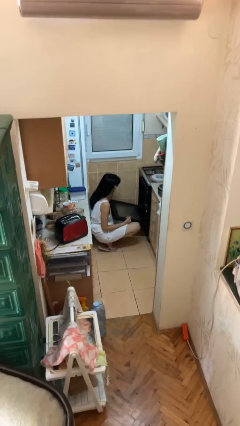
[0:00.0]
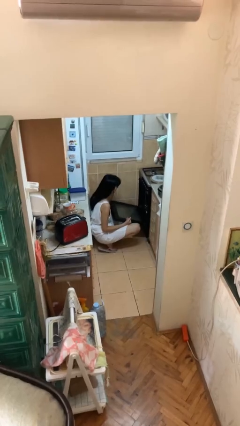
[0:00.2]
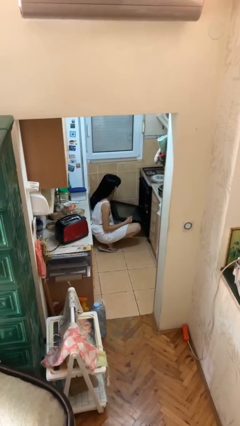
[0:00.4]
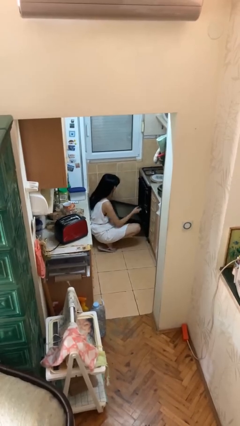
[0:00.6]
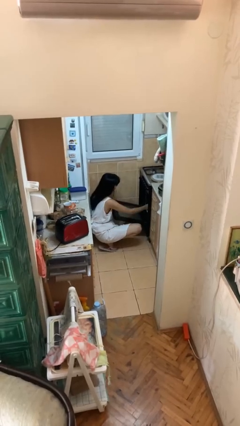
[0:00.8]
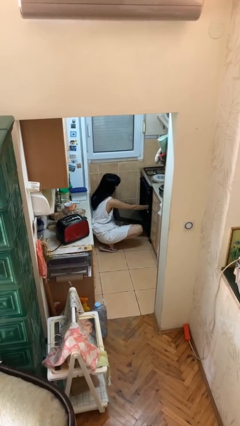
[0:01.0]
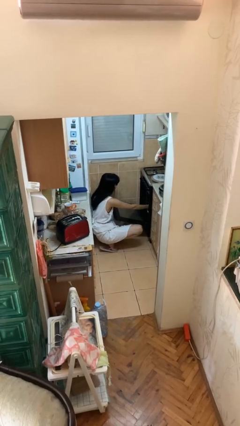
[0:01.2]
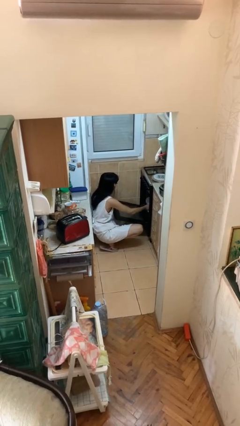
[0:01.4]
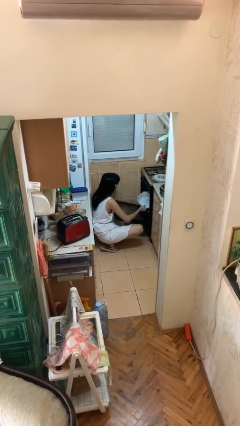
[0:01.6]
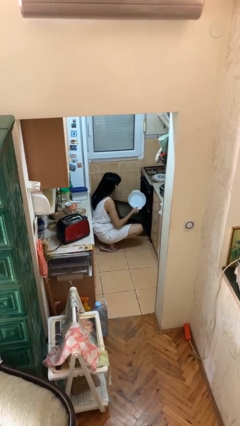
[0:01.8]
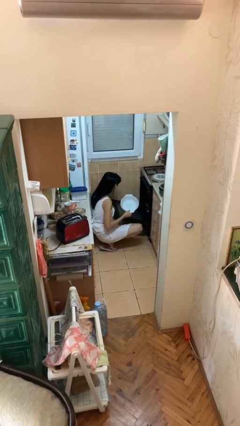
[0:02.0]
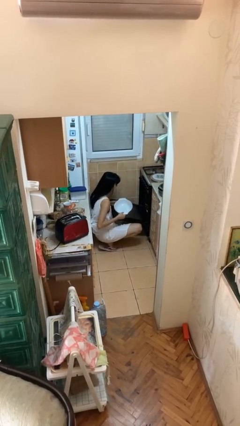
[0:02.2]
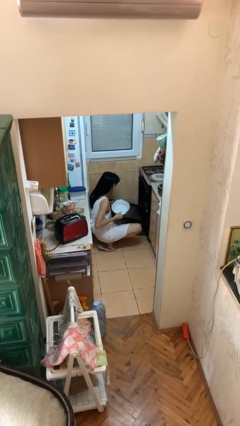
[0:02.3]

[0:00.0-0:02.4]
person takes object from oven

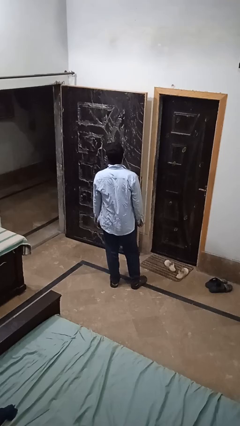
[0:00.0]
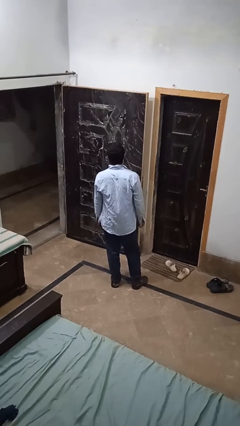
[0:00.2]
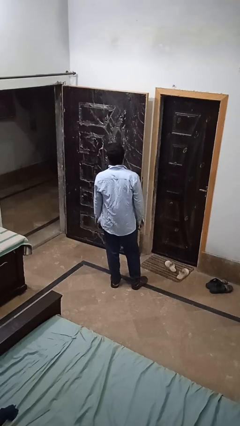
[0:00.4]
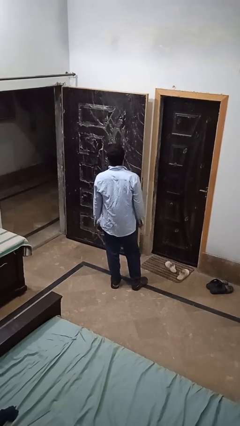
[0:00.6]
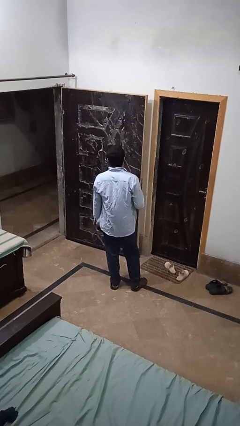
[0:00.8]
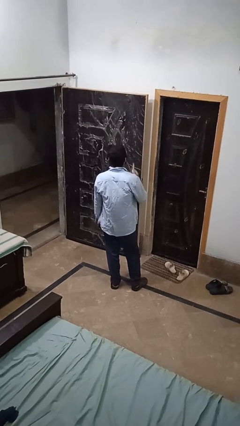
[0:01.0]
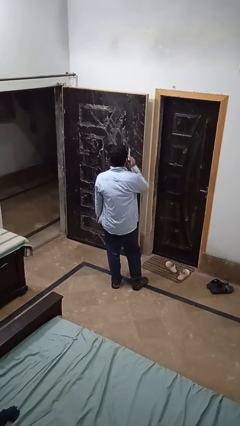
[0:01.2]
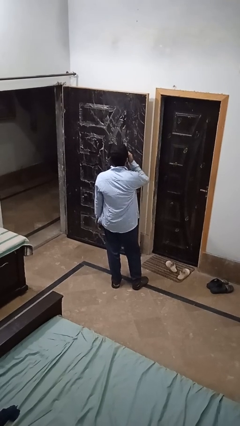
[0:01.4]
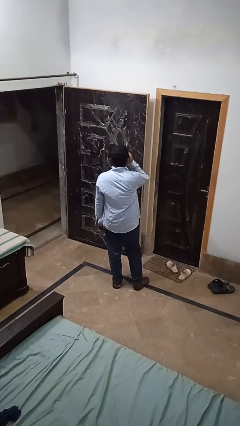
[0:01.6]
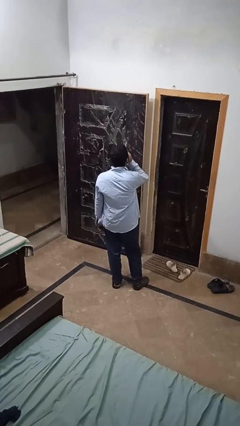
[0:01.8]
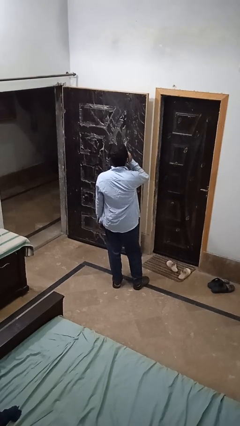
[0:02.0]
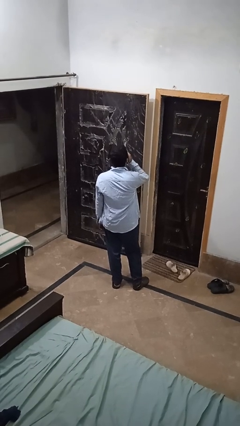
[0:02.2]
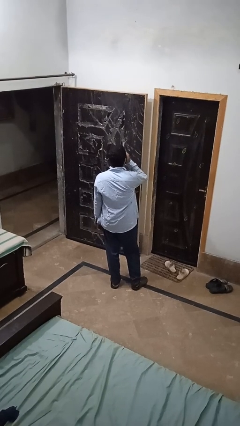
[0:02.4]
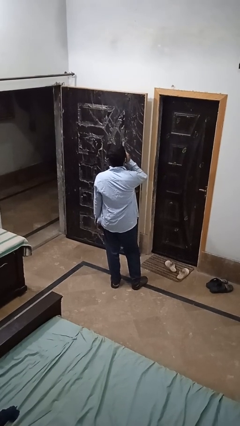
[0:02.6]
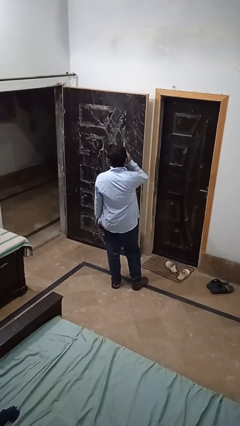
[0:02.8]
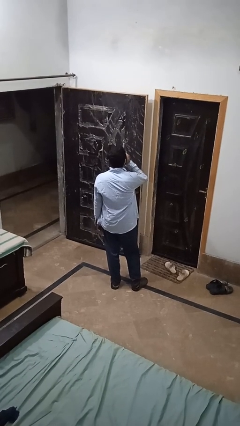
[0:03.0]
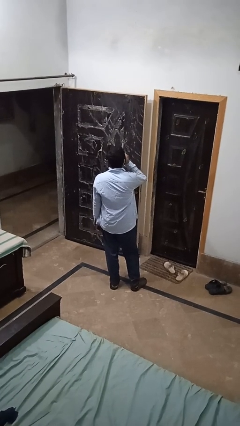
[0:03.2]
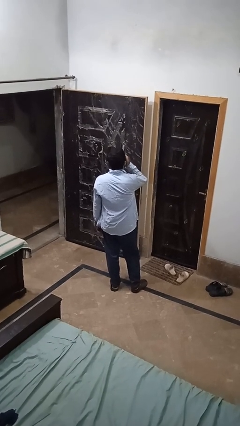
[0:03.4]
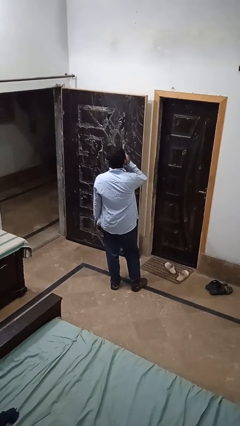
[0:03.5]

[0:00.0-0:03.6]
person vapes

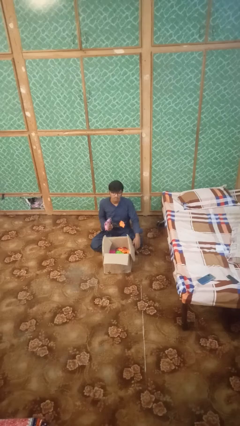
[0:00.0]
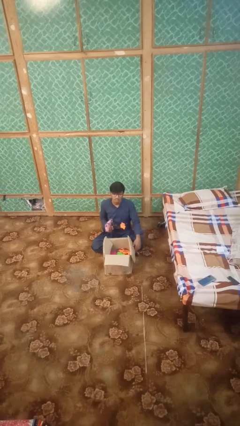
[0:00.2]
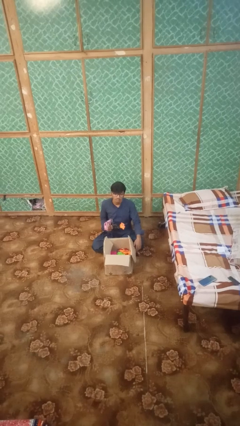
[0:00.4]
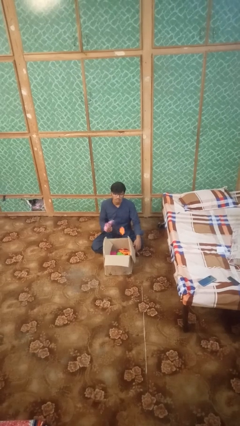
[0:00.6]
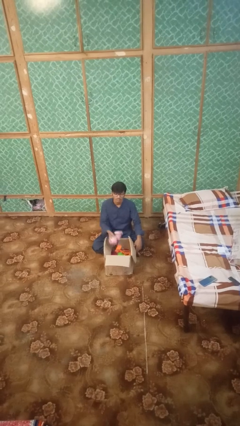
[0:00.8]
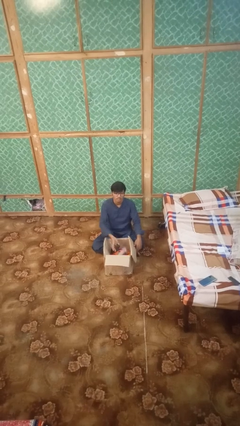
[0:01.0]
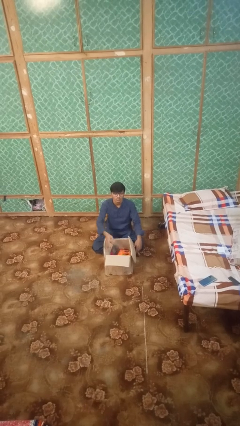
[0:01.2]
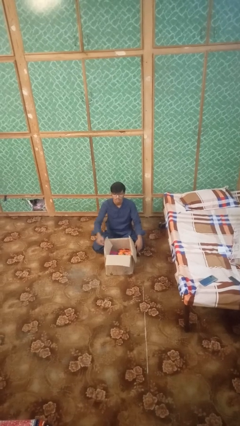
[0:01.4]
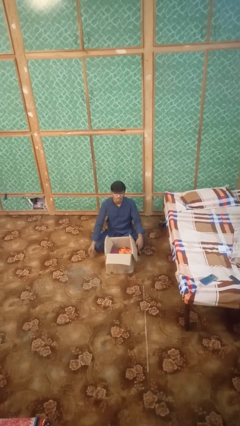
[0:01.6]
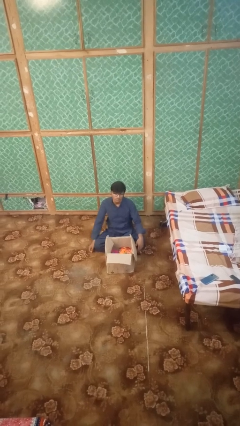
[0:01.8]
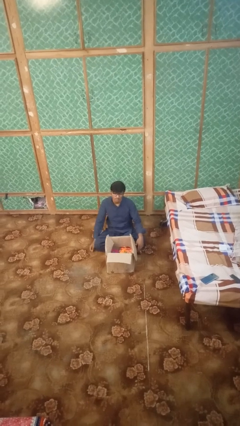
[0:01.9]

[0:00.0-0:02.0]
person puts object into box

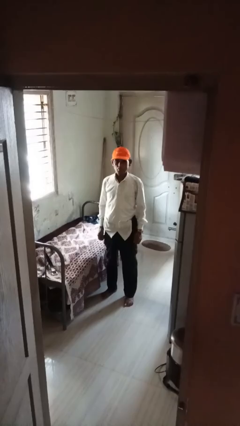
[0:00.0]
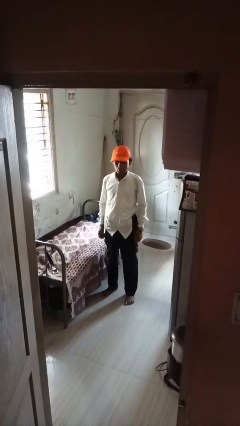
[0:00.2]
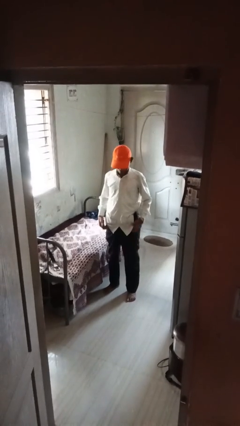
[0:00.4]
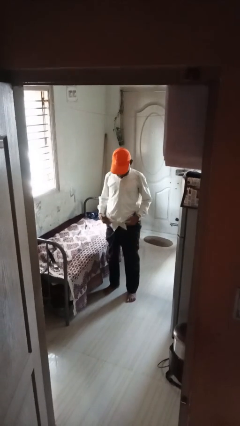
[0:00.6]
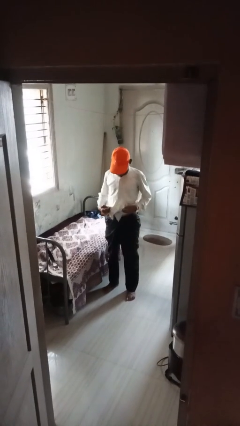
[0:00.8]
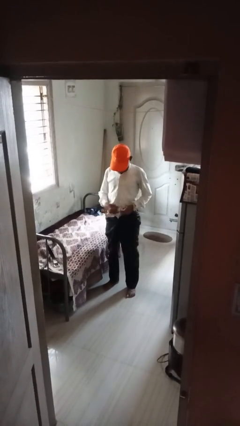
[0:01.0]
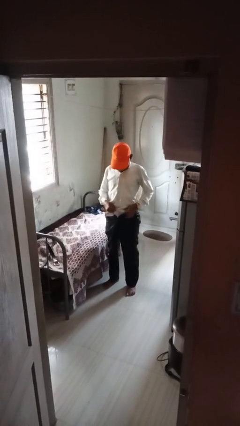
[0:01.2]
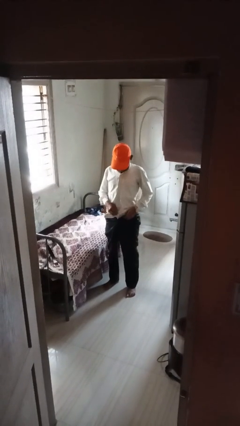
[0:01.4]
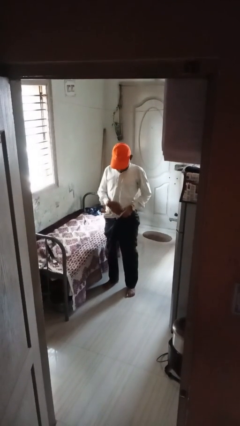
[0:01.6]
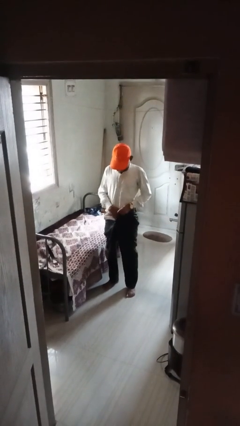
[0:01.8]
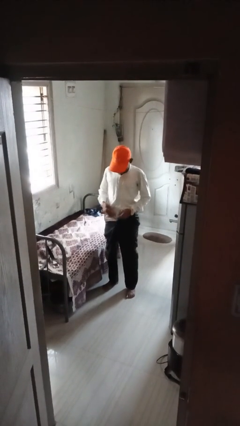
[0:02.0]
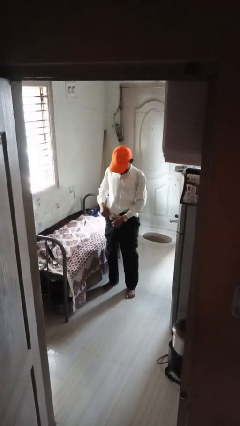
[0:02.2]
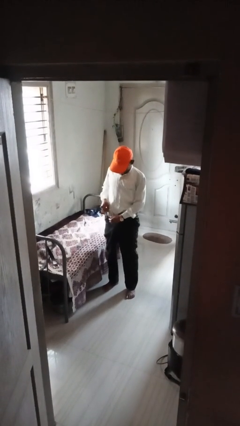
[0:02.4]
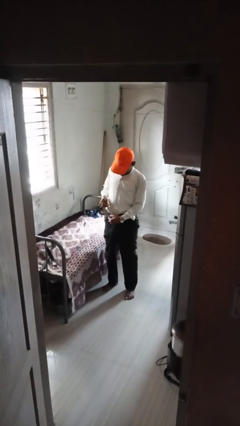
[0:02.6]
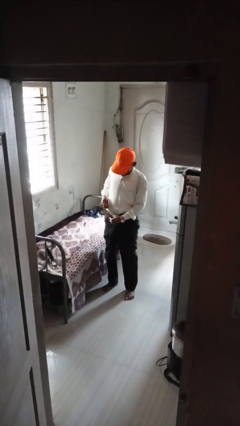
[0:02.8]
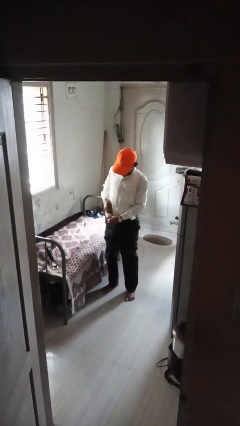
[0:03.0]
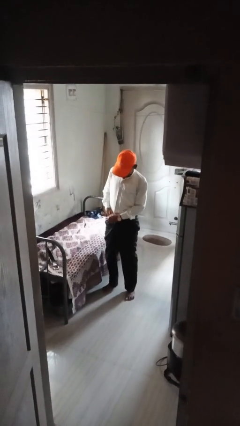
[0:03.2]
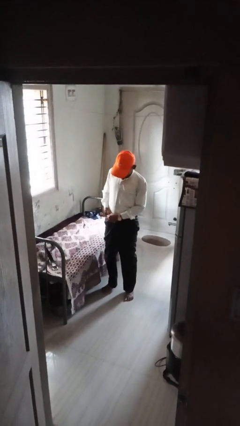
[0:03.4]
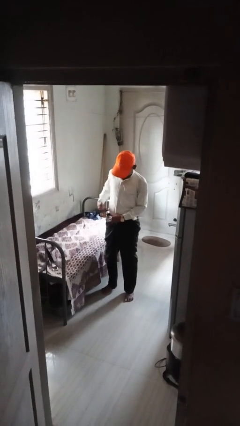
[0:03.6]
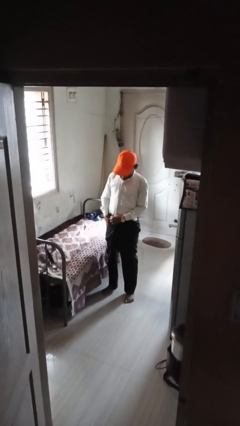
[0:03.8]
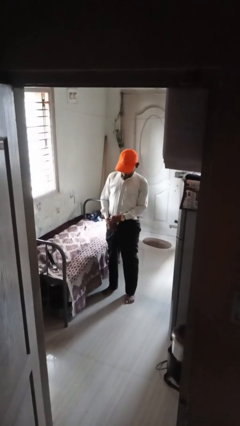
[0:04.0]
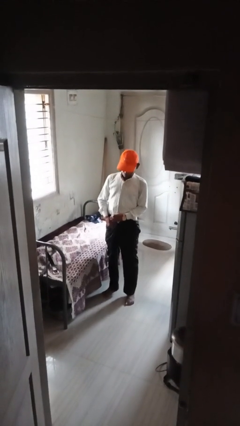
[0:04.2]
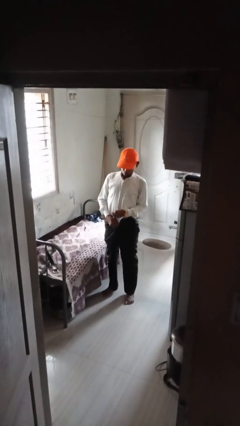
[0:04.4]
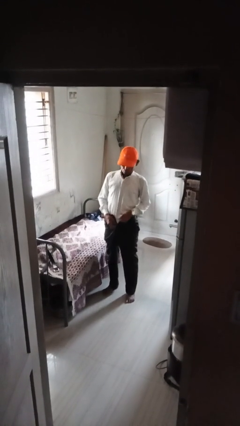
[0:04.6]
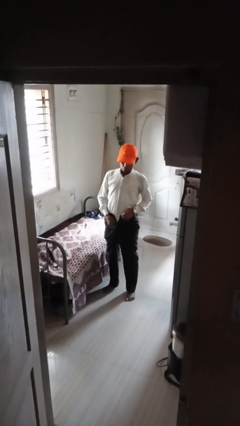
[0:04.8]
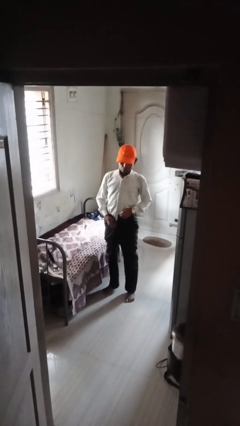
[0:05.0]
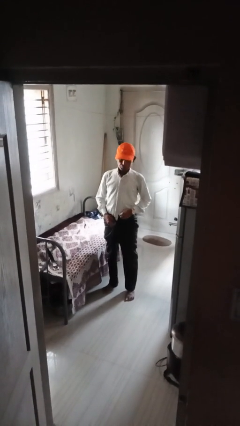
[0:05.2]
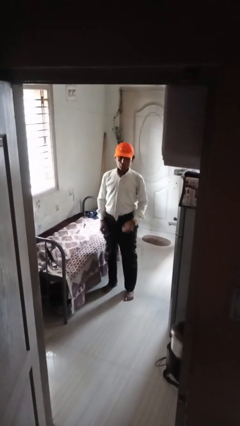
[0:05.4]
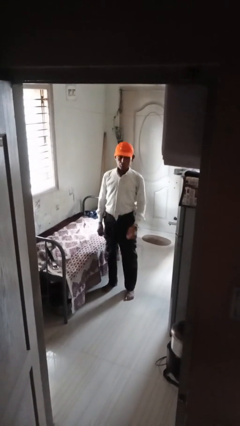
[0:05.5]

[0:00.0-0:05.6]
person tucks in shirt

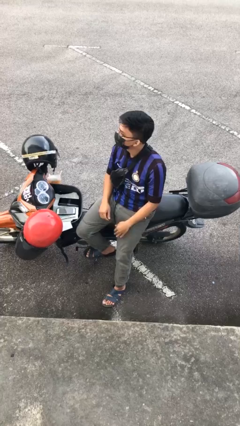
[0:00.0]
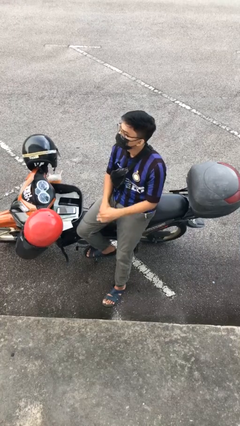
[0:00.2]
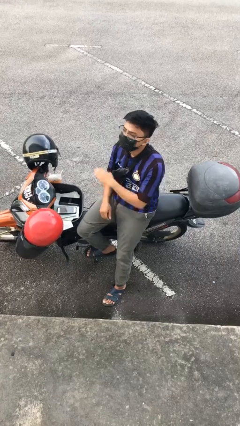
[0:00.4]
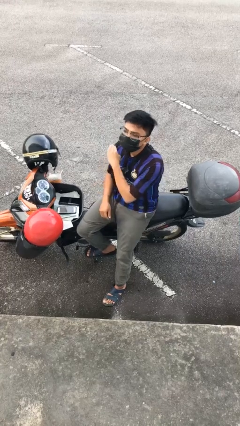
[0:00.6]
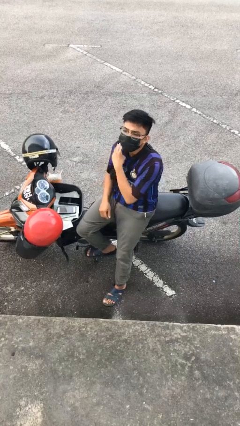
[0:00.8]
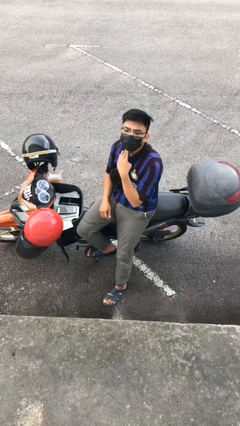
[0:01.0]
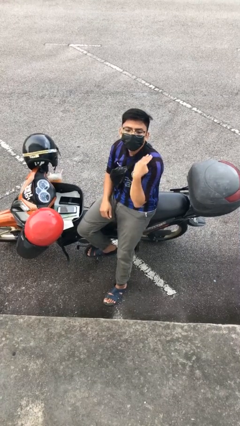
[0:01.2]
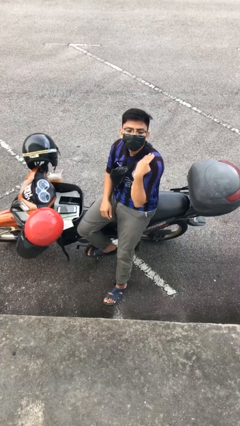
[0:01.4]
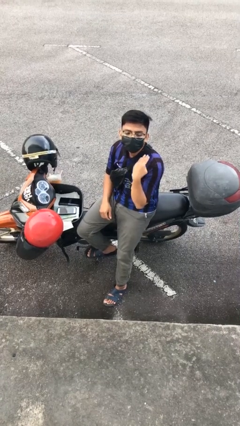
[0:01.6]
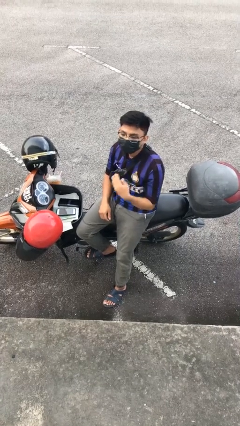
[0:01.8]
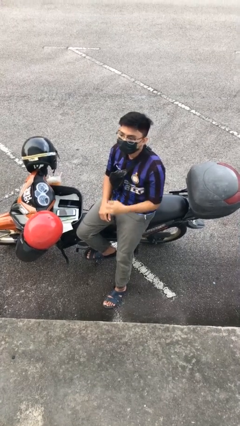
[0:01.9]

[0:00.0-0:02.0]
person gestures cut

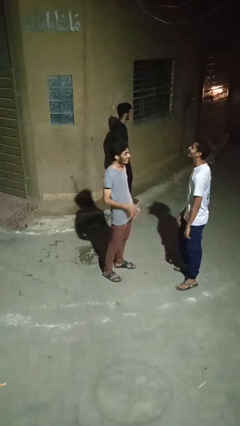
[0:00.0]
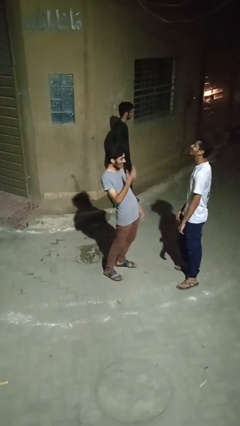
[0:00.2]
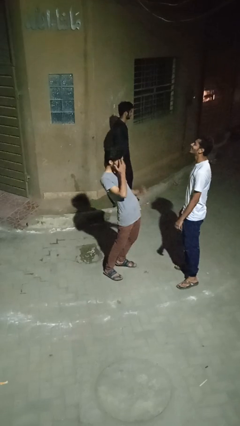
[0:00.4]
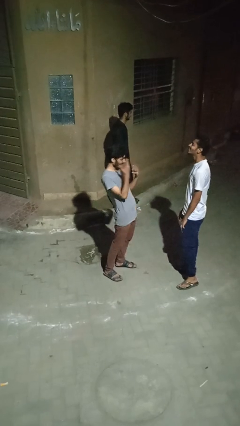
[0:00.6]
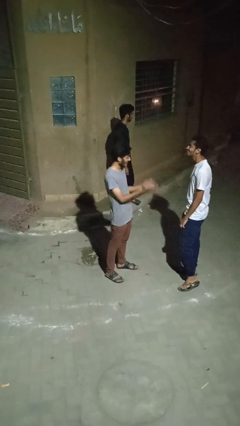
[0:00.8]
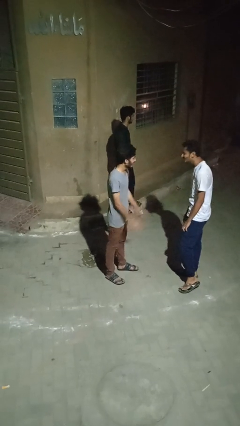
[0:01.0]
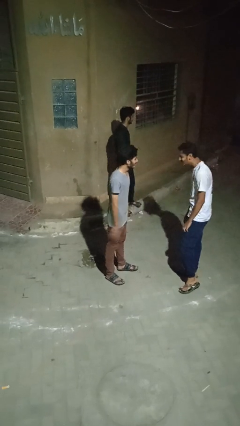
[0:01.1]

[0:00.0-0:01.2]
person laughs with person

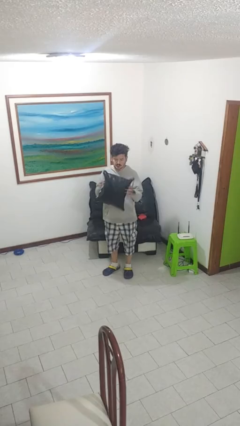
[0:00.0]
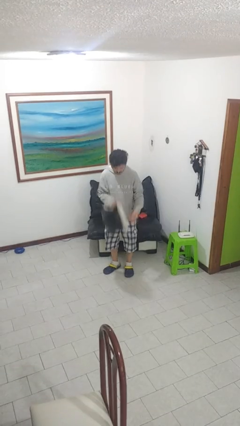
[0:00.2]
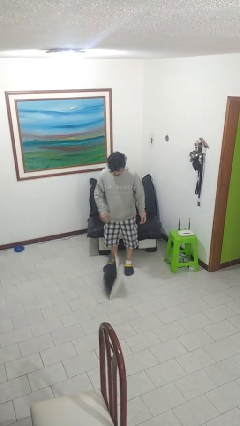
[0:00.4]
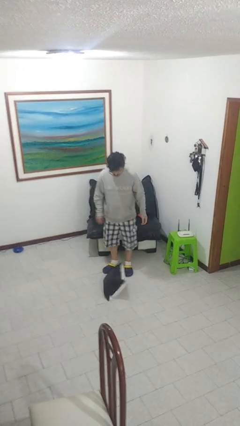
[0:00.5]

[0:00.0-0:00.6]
person drops object
